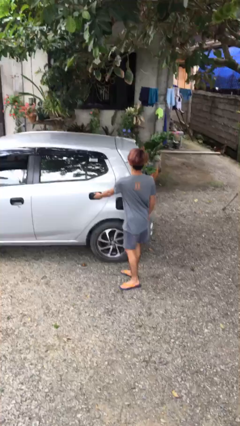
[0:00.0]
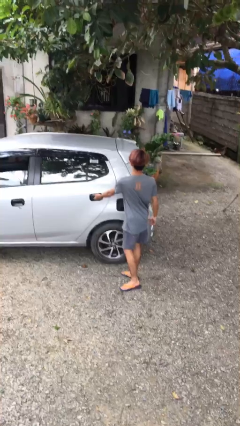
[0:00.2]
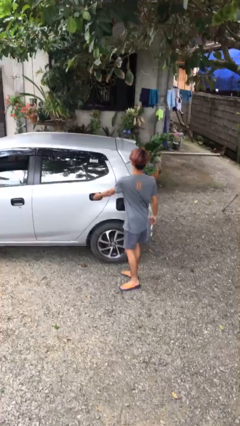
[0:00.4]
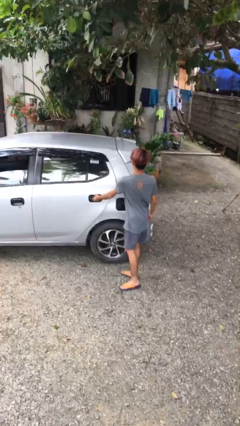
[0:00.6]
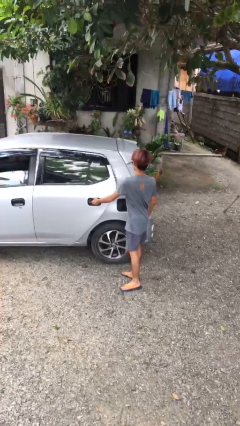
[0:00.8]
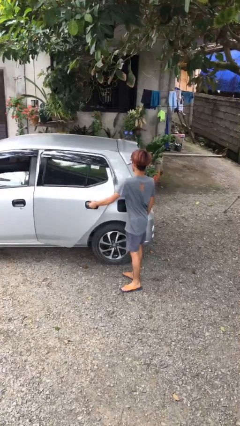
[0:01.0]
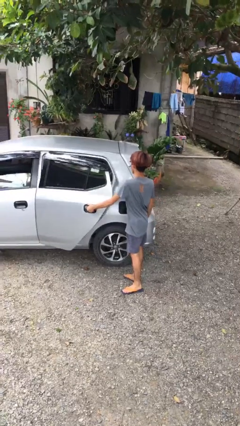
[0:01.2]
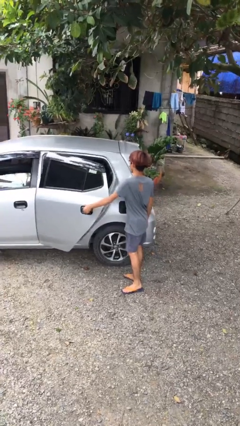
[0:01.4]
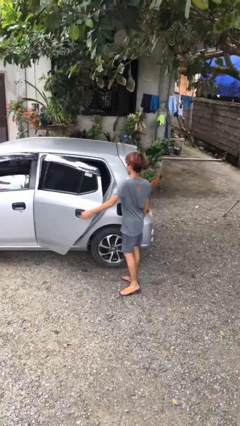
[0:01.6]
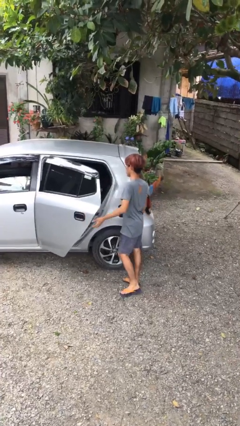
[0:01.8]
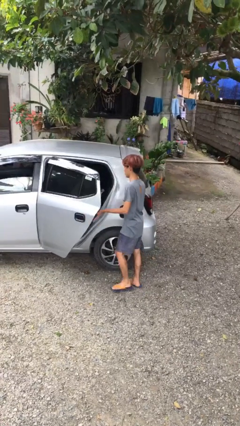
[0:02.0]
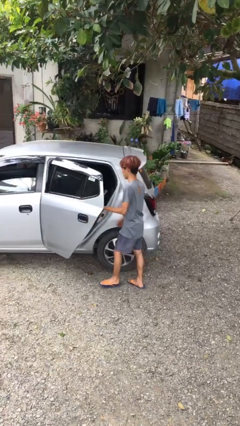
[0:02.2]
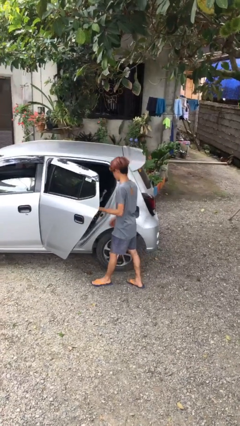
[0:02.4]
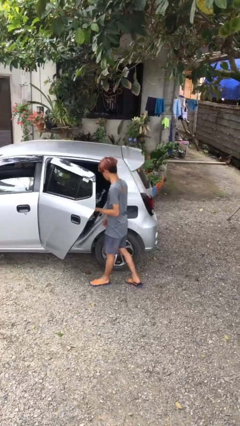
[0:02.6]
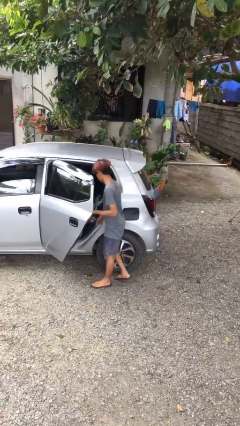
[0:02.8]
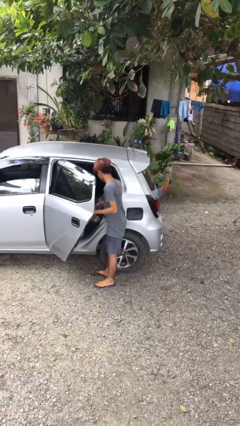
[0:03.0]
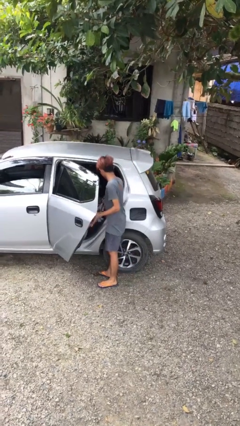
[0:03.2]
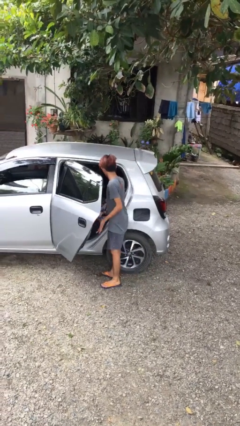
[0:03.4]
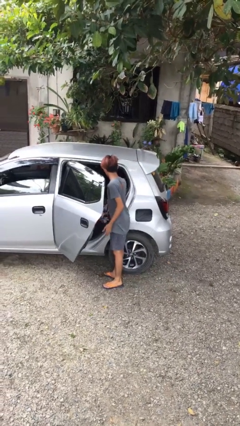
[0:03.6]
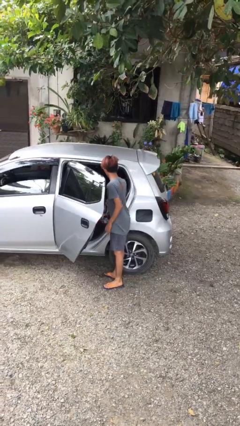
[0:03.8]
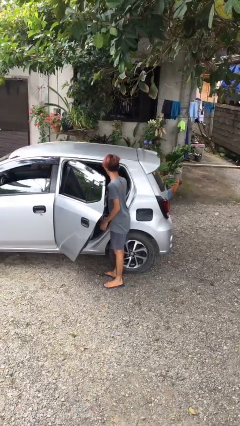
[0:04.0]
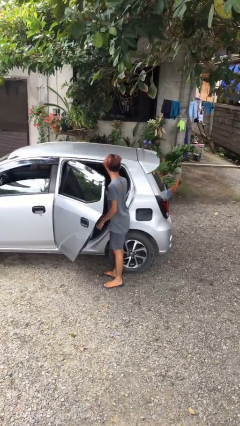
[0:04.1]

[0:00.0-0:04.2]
person opens car door

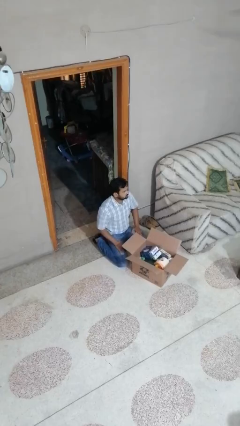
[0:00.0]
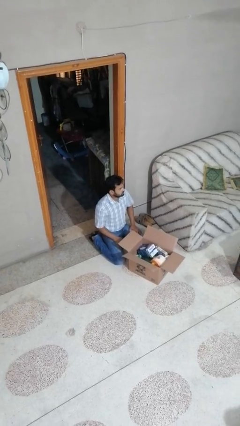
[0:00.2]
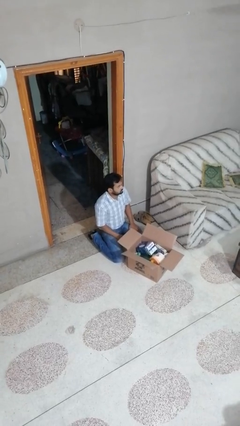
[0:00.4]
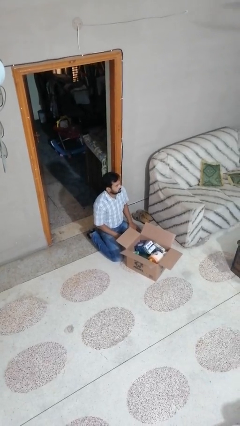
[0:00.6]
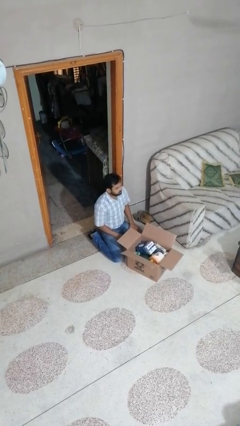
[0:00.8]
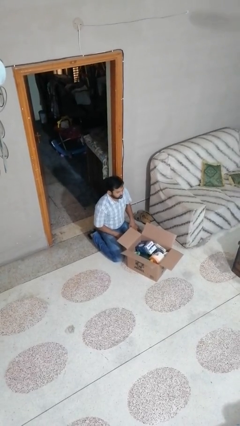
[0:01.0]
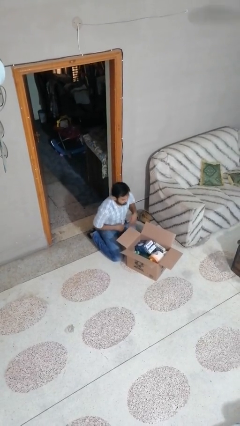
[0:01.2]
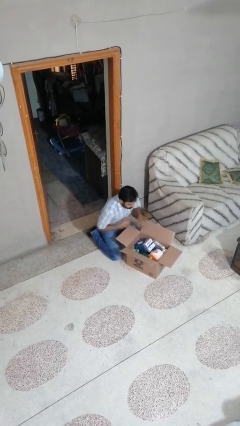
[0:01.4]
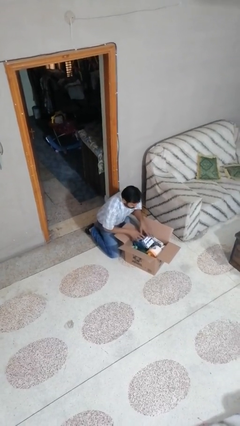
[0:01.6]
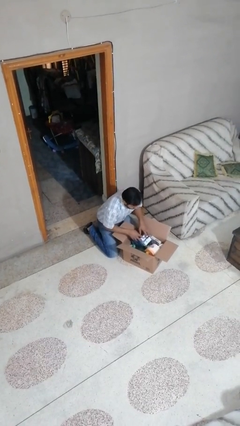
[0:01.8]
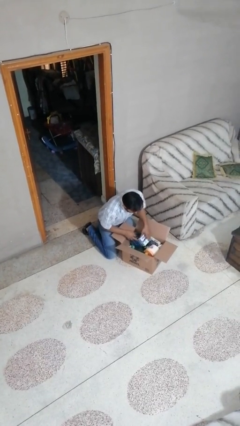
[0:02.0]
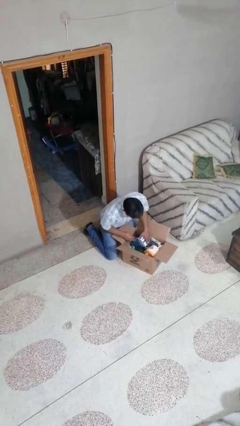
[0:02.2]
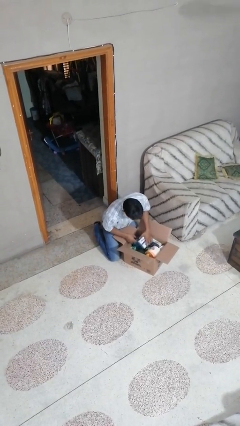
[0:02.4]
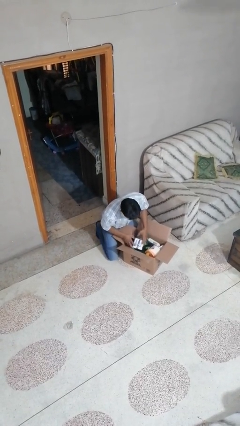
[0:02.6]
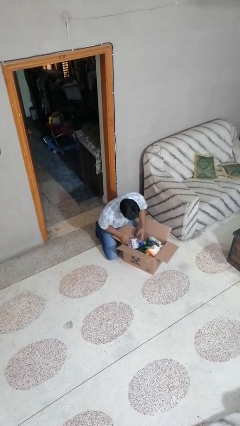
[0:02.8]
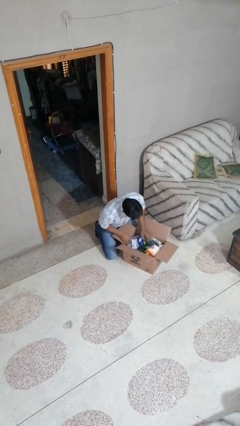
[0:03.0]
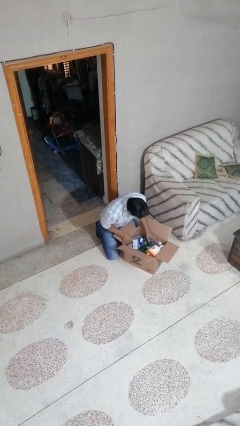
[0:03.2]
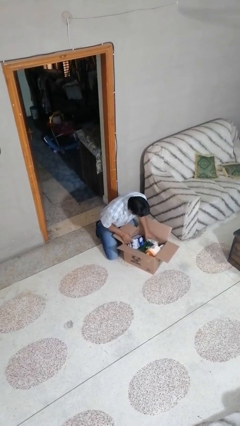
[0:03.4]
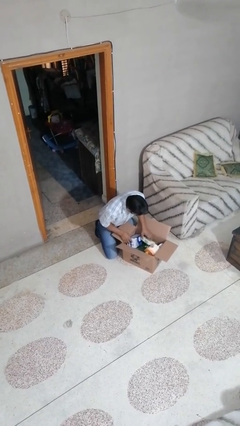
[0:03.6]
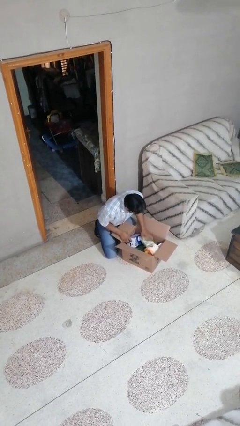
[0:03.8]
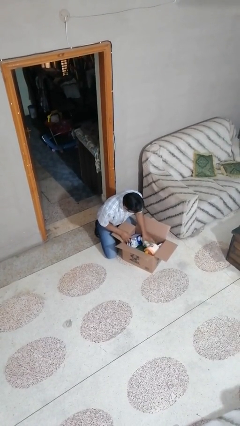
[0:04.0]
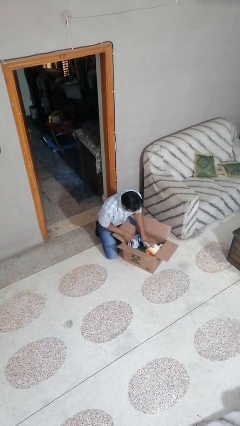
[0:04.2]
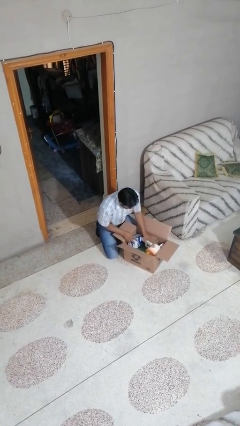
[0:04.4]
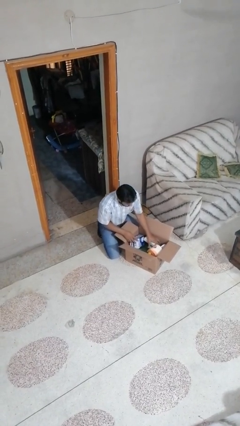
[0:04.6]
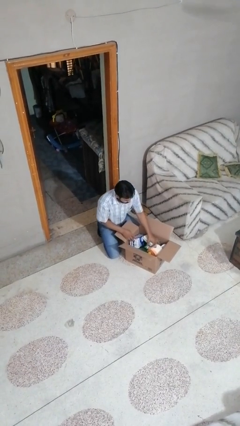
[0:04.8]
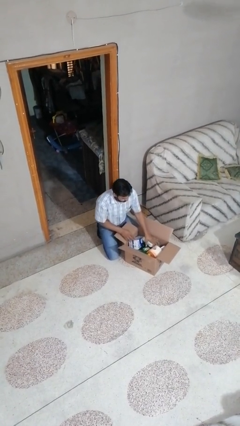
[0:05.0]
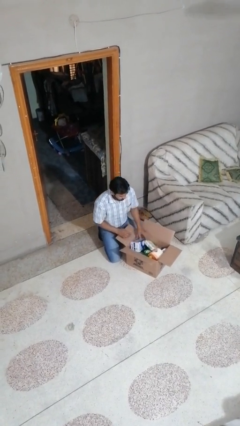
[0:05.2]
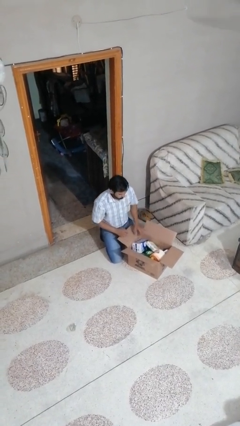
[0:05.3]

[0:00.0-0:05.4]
person searches in box

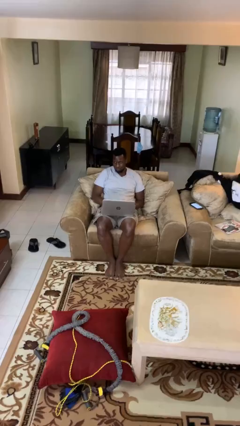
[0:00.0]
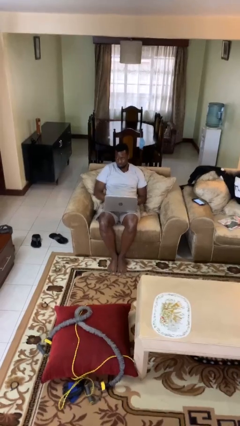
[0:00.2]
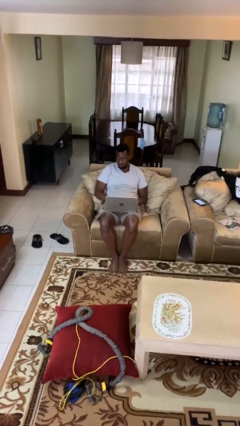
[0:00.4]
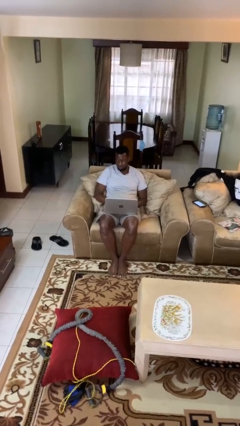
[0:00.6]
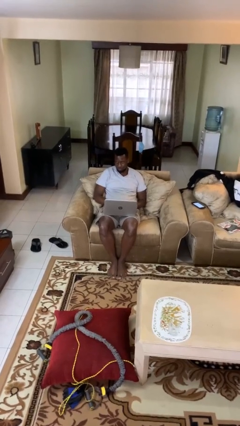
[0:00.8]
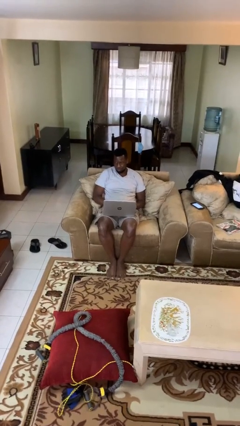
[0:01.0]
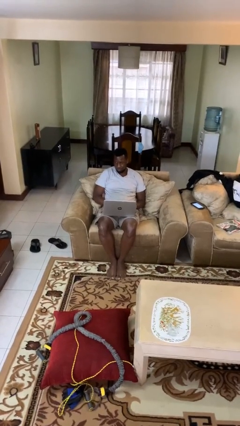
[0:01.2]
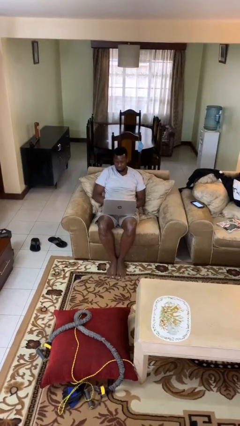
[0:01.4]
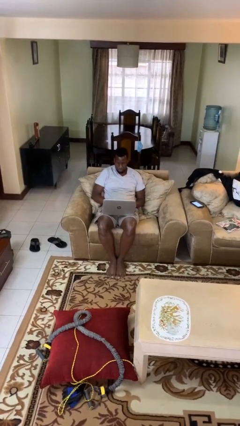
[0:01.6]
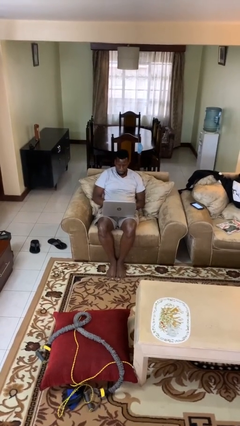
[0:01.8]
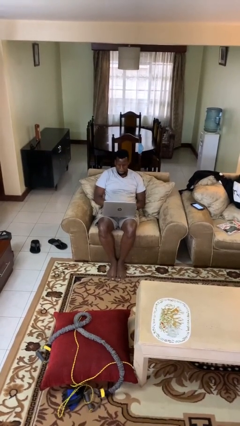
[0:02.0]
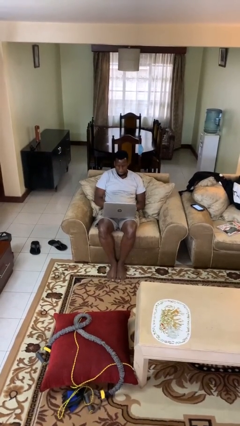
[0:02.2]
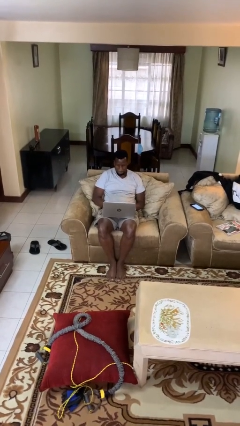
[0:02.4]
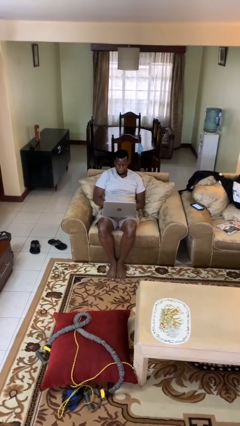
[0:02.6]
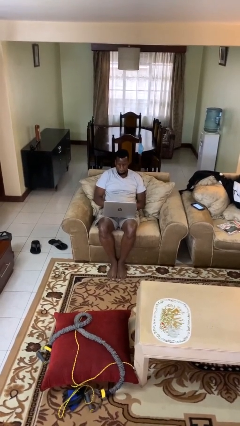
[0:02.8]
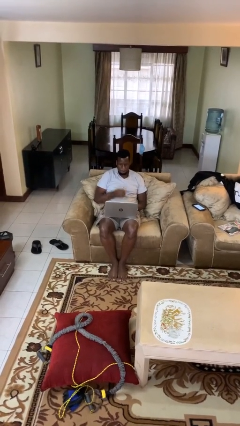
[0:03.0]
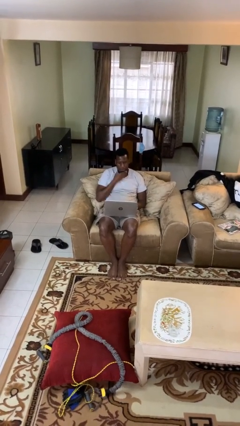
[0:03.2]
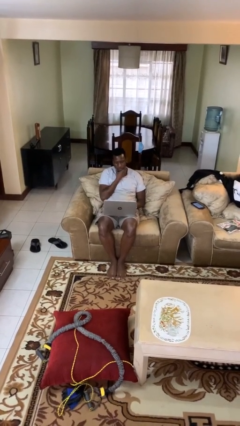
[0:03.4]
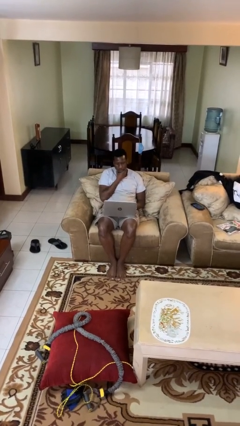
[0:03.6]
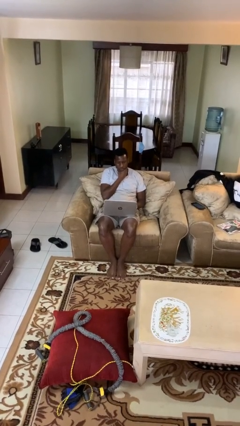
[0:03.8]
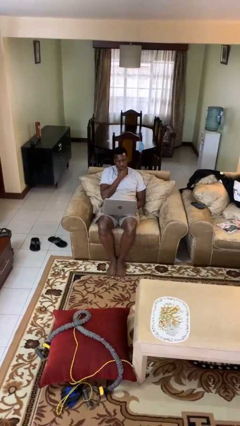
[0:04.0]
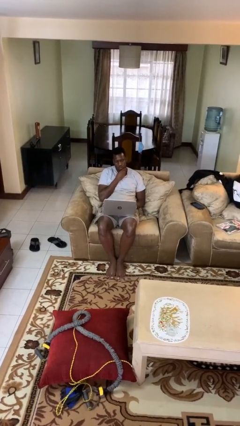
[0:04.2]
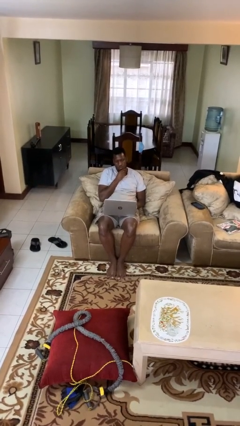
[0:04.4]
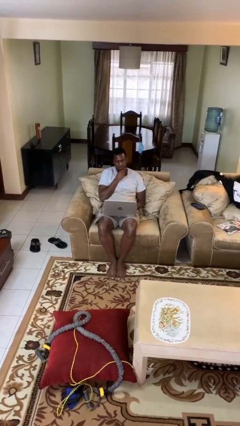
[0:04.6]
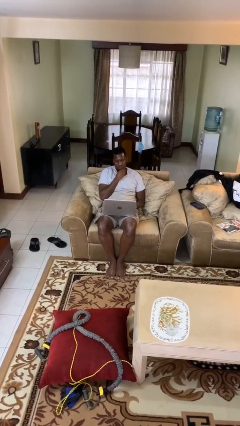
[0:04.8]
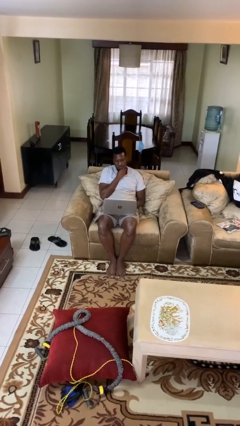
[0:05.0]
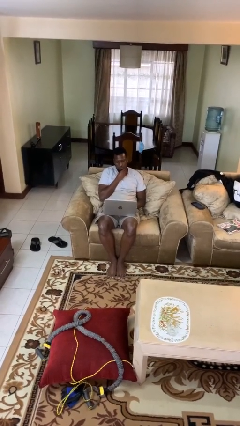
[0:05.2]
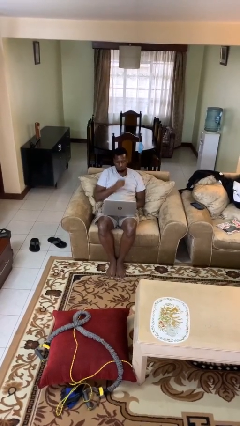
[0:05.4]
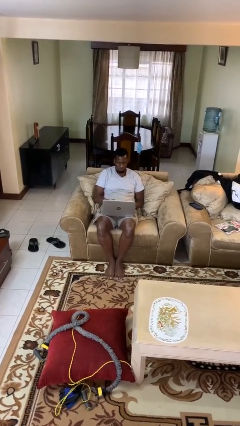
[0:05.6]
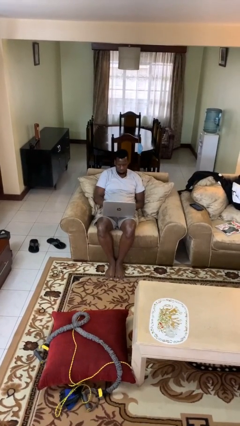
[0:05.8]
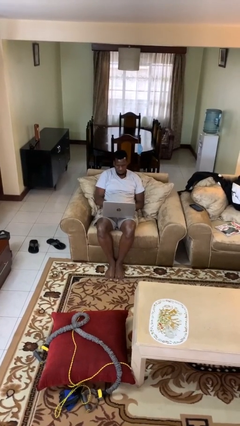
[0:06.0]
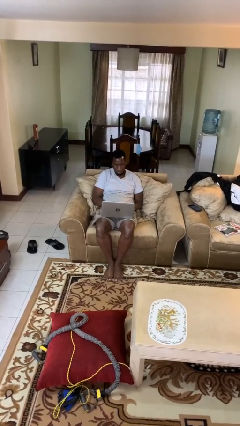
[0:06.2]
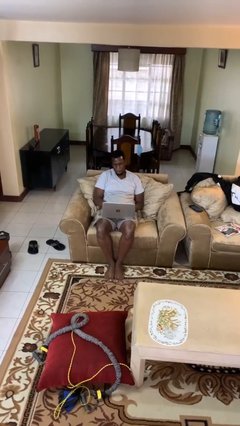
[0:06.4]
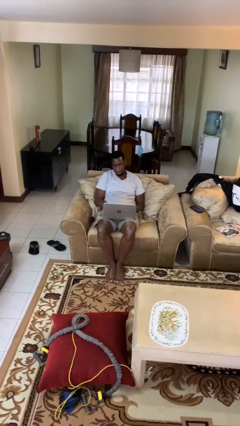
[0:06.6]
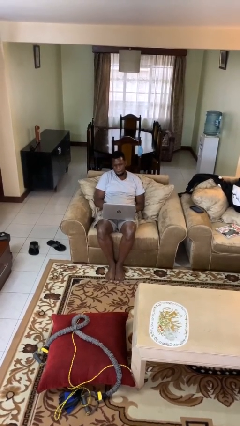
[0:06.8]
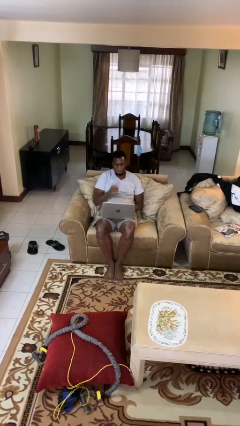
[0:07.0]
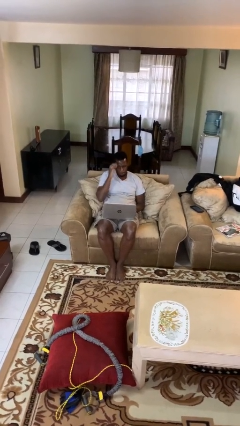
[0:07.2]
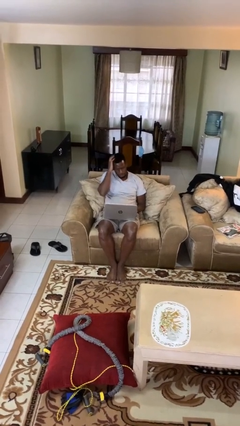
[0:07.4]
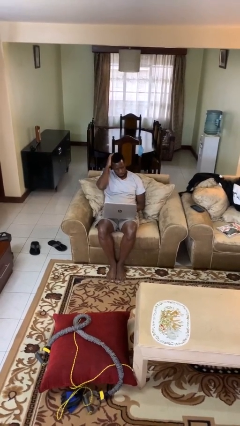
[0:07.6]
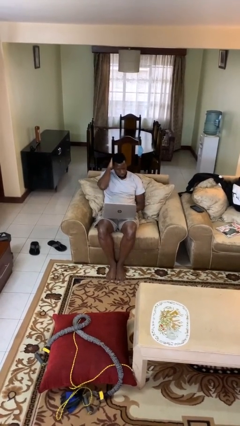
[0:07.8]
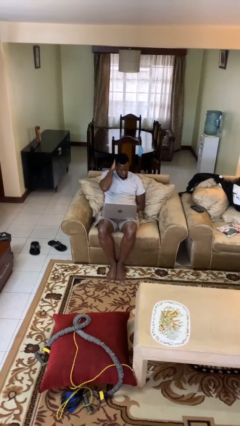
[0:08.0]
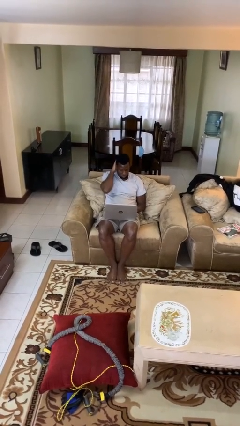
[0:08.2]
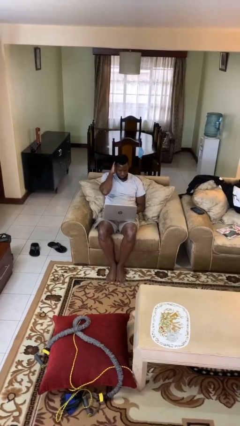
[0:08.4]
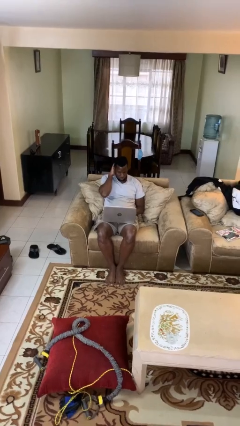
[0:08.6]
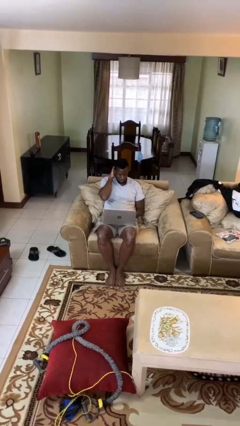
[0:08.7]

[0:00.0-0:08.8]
person interacts with laptop
